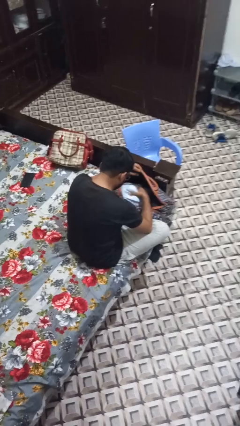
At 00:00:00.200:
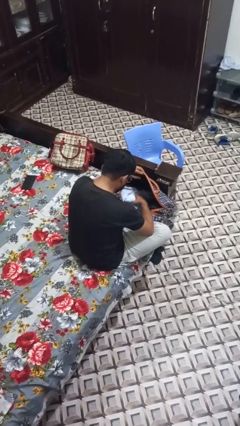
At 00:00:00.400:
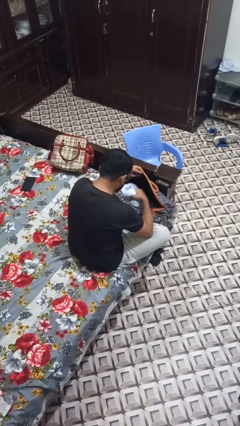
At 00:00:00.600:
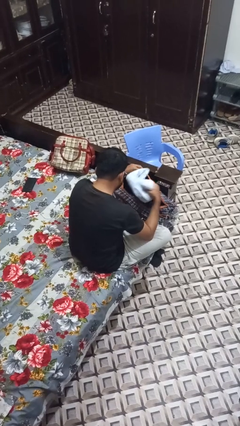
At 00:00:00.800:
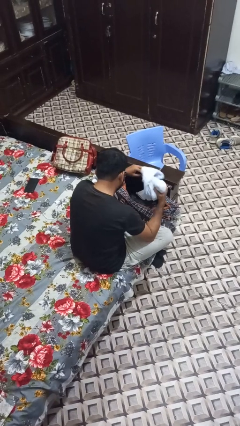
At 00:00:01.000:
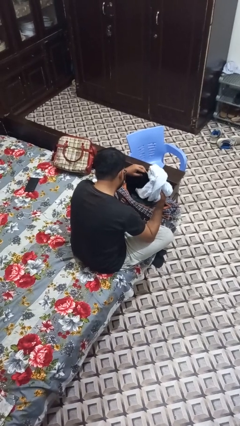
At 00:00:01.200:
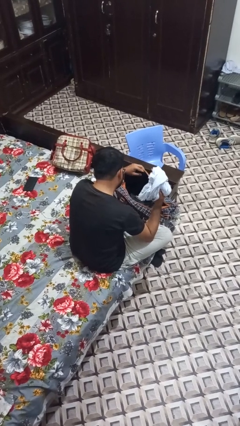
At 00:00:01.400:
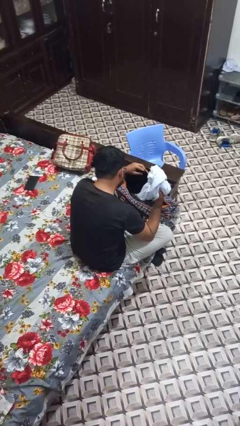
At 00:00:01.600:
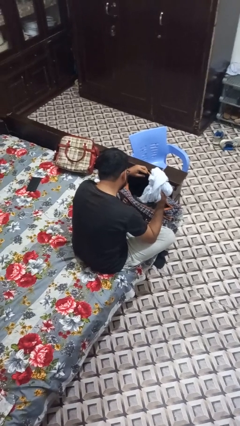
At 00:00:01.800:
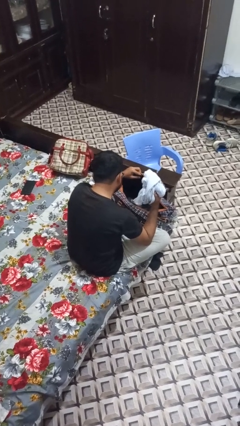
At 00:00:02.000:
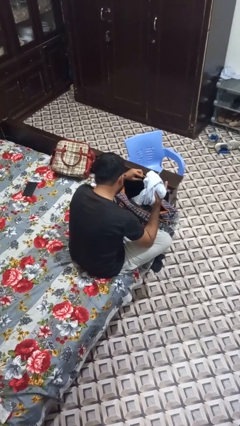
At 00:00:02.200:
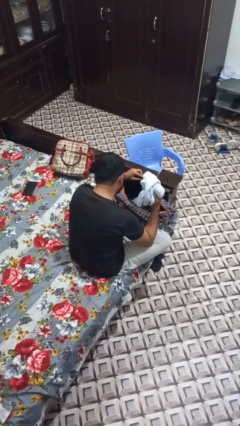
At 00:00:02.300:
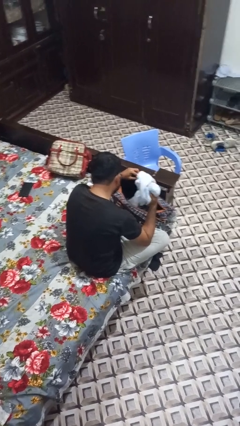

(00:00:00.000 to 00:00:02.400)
person takes object from backpack

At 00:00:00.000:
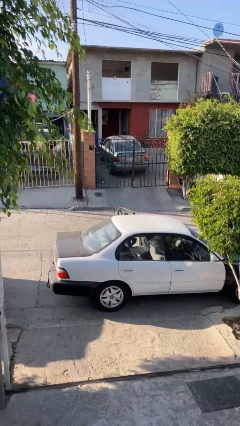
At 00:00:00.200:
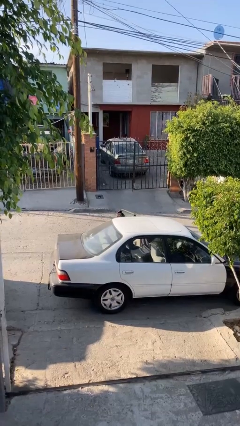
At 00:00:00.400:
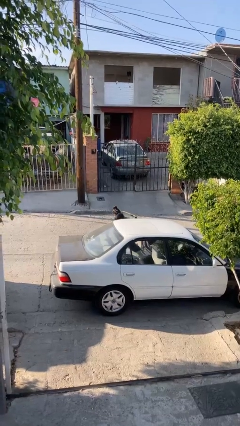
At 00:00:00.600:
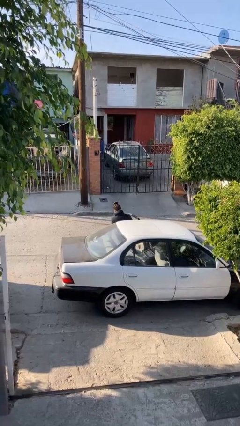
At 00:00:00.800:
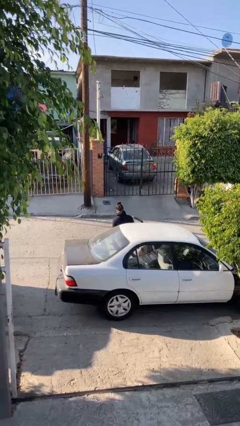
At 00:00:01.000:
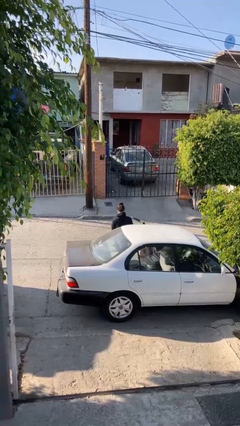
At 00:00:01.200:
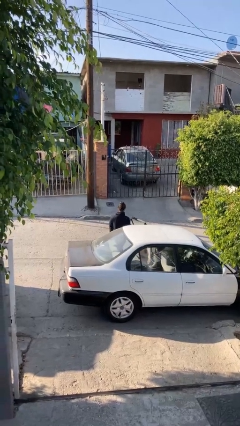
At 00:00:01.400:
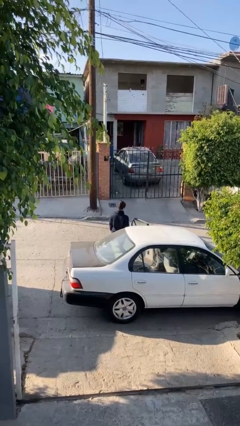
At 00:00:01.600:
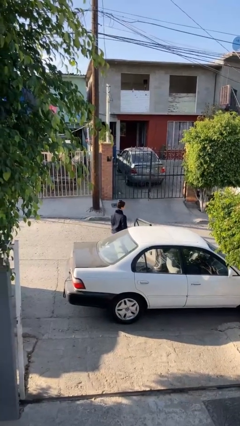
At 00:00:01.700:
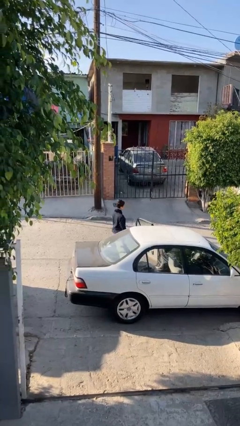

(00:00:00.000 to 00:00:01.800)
person exits car

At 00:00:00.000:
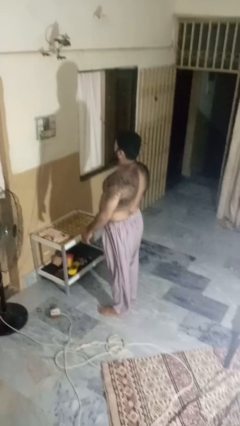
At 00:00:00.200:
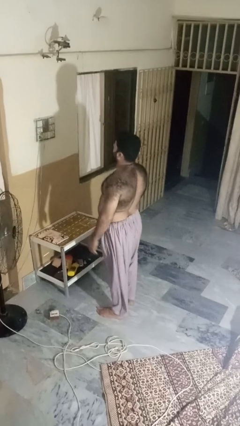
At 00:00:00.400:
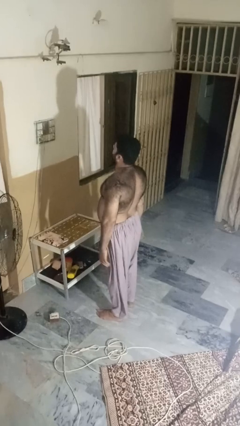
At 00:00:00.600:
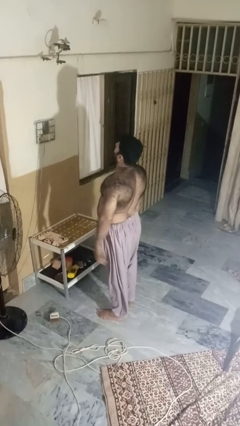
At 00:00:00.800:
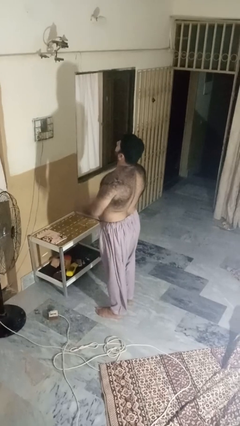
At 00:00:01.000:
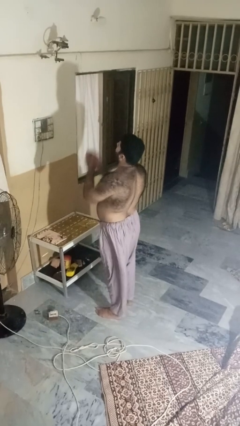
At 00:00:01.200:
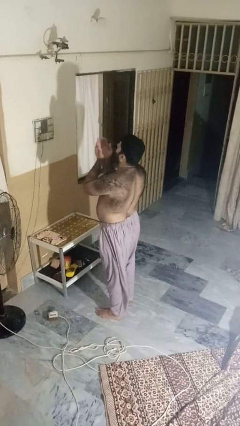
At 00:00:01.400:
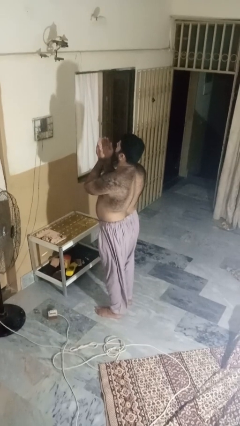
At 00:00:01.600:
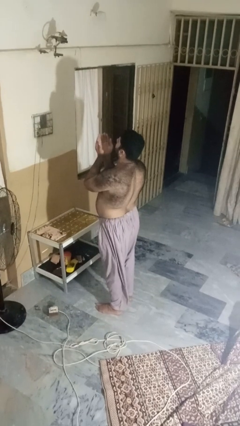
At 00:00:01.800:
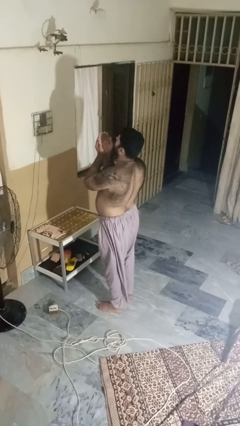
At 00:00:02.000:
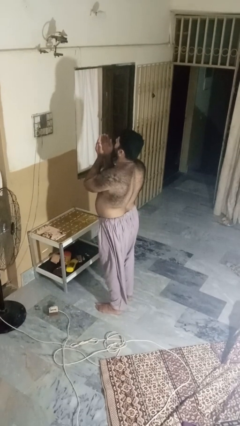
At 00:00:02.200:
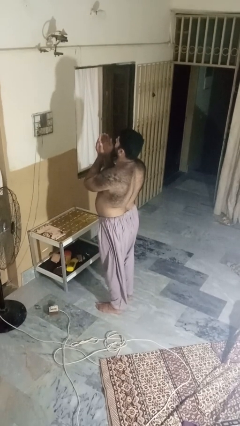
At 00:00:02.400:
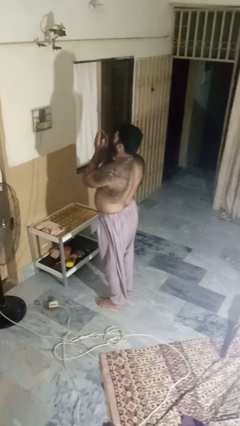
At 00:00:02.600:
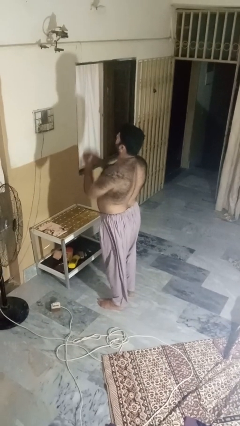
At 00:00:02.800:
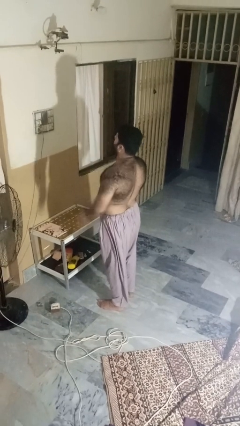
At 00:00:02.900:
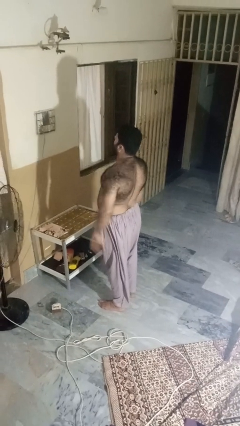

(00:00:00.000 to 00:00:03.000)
person prays

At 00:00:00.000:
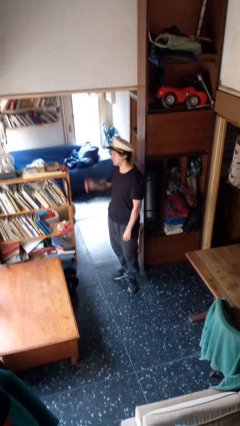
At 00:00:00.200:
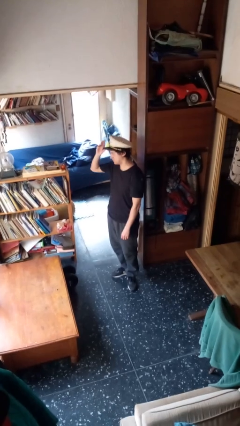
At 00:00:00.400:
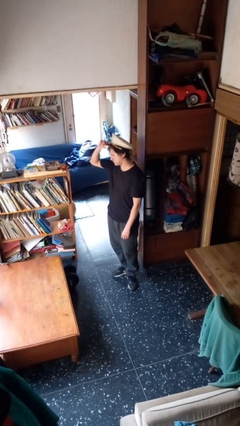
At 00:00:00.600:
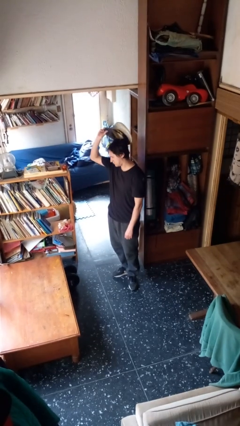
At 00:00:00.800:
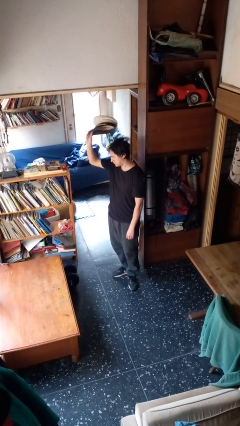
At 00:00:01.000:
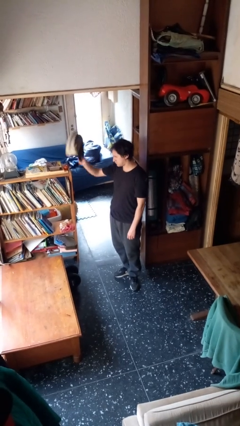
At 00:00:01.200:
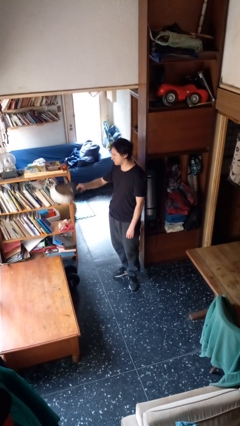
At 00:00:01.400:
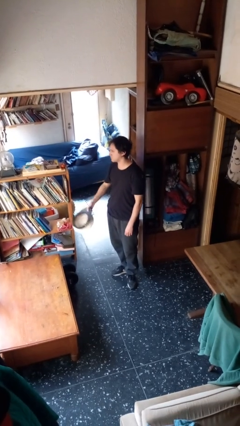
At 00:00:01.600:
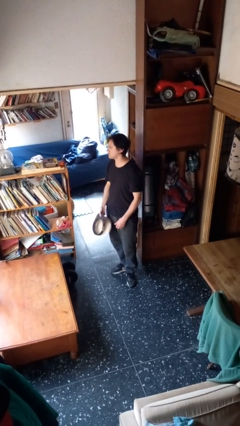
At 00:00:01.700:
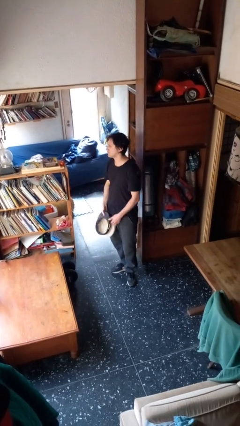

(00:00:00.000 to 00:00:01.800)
person takes off hat

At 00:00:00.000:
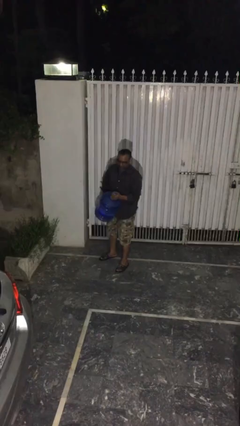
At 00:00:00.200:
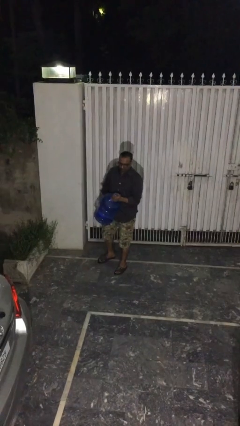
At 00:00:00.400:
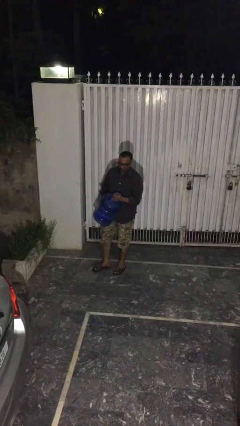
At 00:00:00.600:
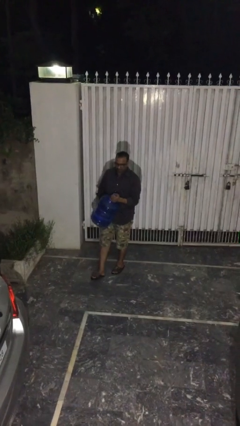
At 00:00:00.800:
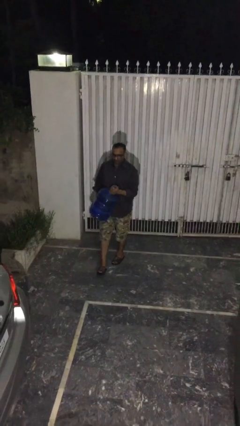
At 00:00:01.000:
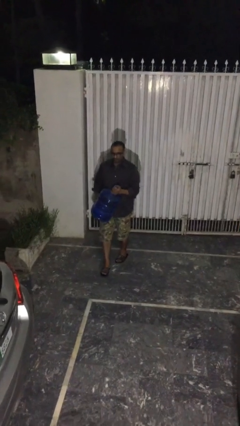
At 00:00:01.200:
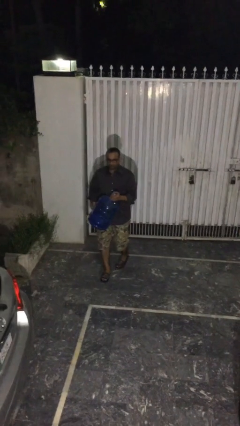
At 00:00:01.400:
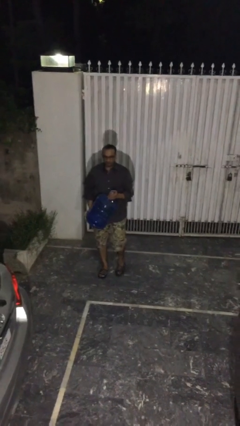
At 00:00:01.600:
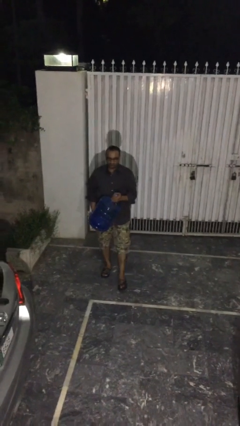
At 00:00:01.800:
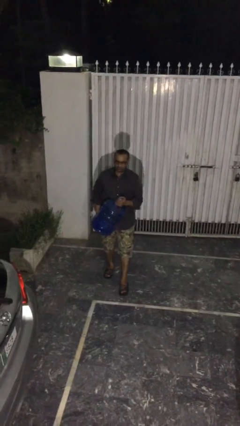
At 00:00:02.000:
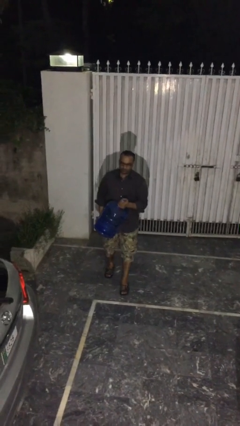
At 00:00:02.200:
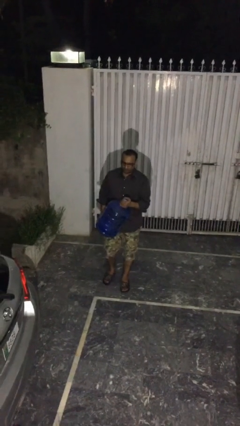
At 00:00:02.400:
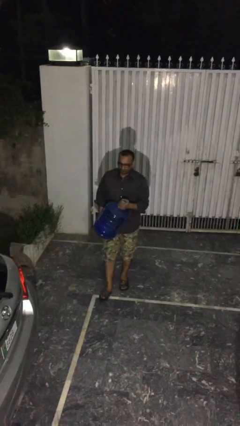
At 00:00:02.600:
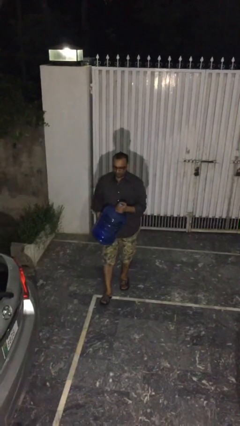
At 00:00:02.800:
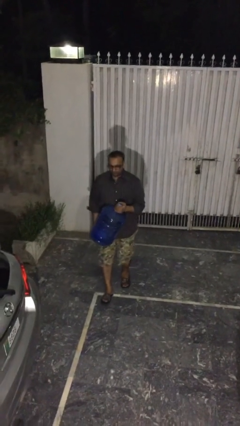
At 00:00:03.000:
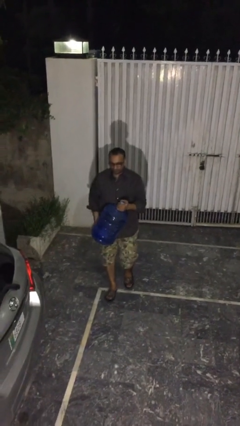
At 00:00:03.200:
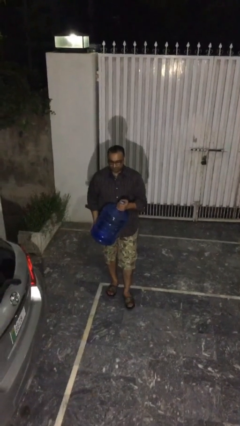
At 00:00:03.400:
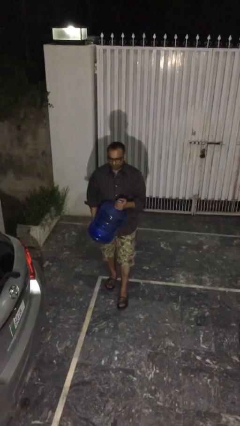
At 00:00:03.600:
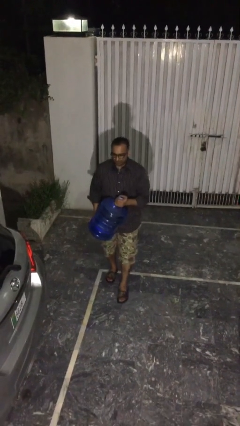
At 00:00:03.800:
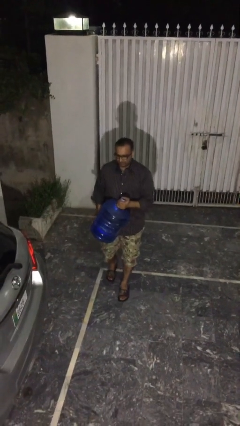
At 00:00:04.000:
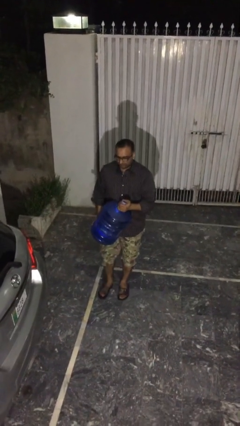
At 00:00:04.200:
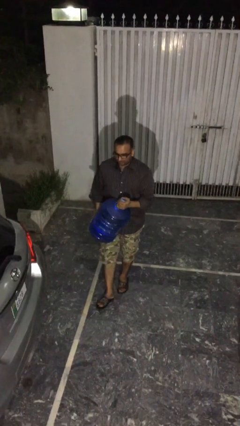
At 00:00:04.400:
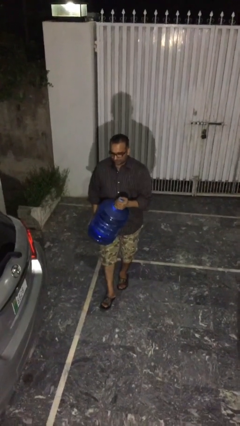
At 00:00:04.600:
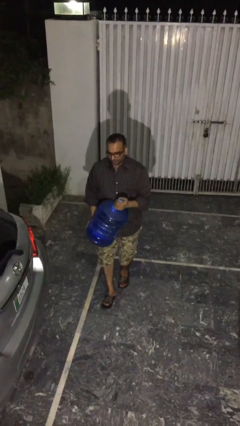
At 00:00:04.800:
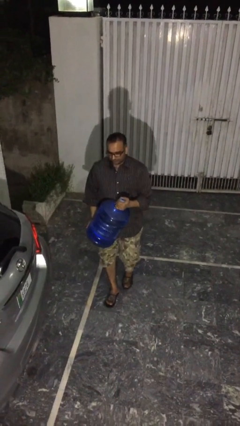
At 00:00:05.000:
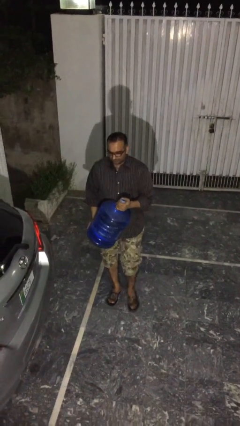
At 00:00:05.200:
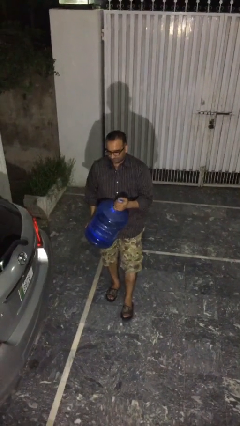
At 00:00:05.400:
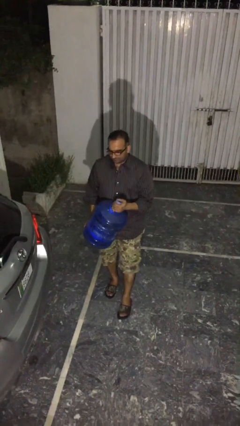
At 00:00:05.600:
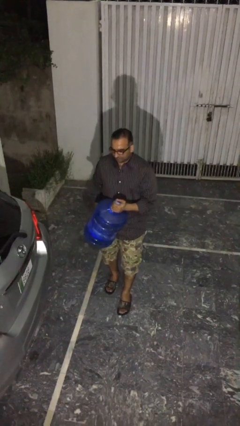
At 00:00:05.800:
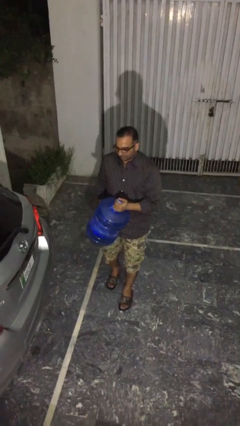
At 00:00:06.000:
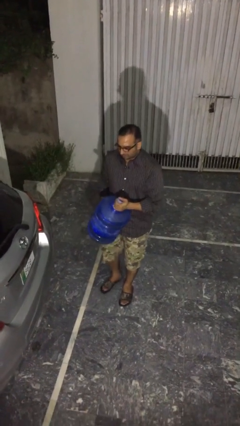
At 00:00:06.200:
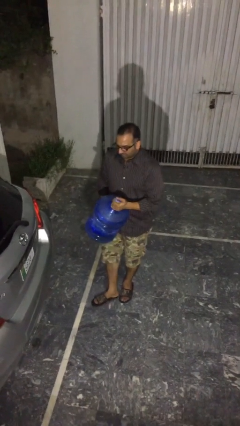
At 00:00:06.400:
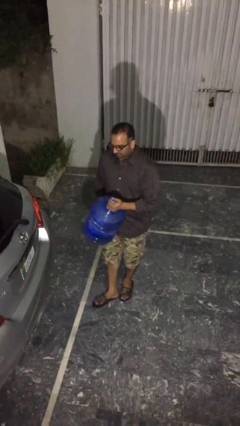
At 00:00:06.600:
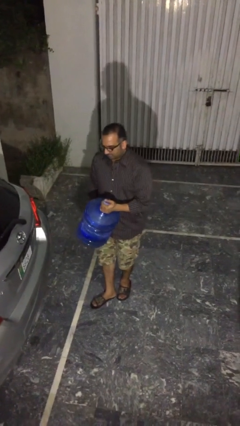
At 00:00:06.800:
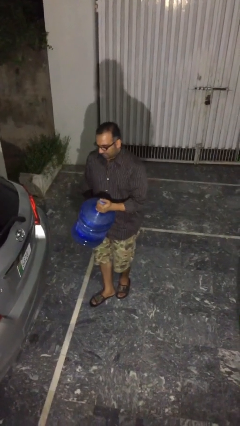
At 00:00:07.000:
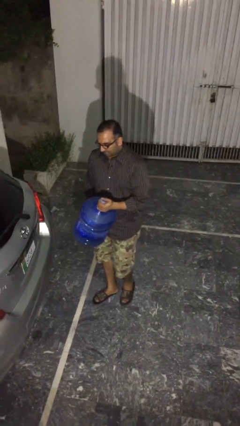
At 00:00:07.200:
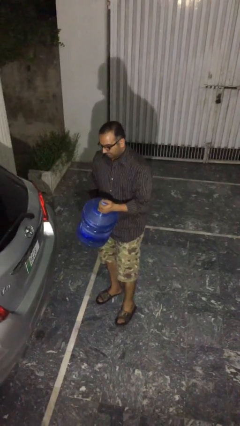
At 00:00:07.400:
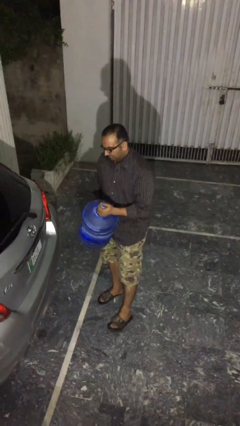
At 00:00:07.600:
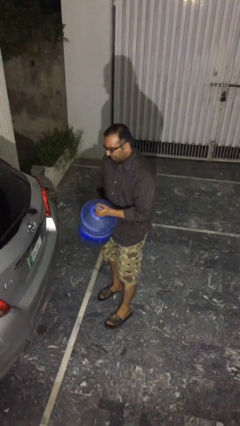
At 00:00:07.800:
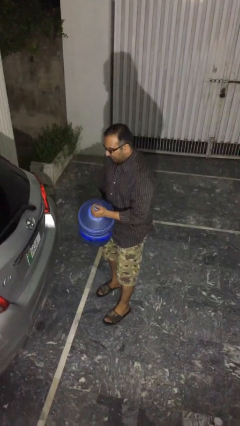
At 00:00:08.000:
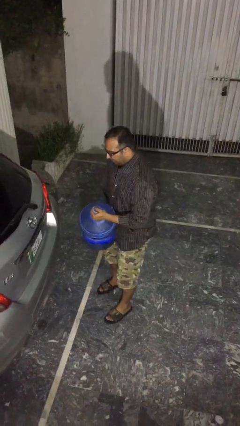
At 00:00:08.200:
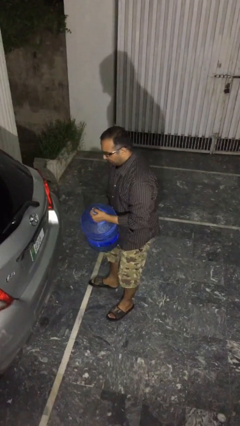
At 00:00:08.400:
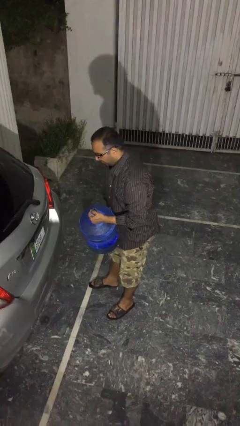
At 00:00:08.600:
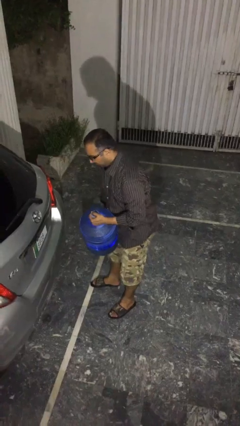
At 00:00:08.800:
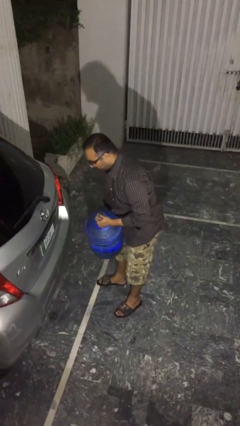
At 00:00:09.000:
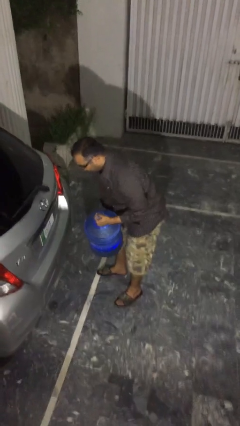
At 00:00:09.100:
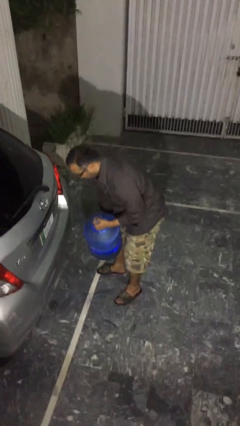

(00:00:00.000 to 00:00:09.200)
person carries heavy object
